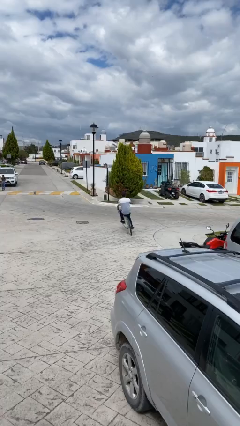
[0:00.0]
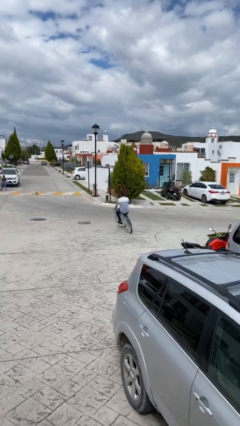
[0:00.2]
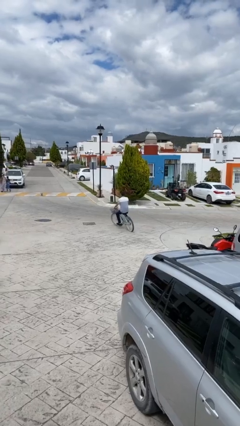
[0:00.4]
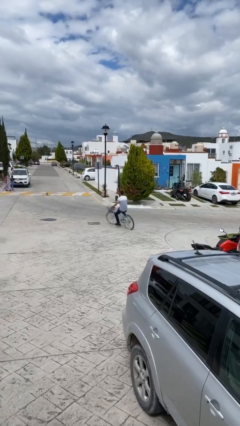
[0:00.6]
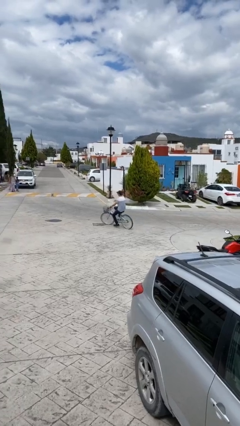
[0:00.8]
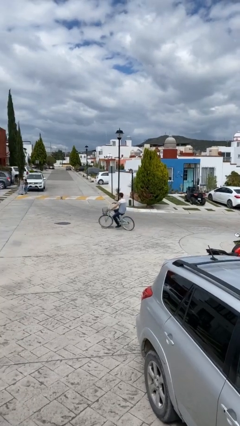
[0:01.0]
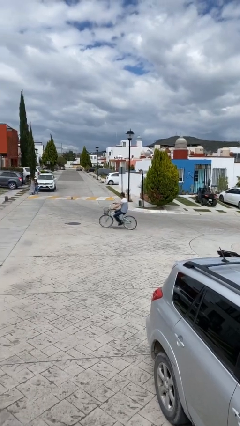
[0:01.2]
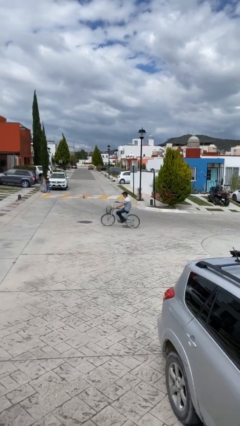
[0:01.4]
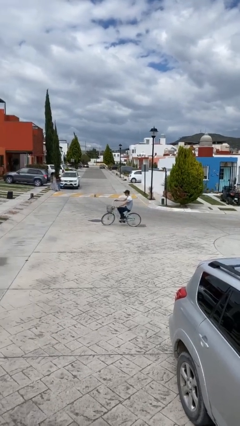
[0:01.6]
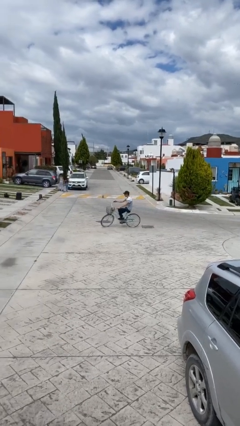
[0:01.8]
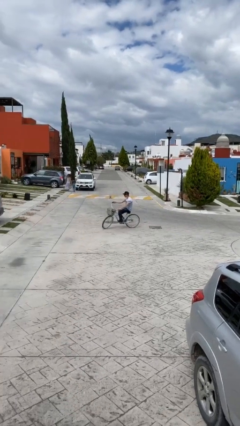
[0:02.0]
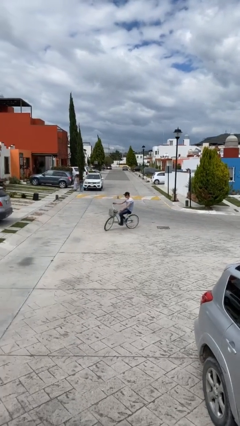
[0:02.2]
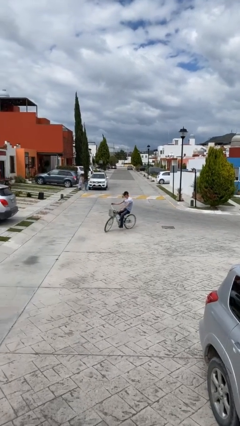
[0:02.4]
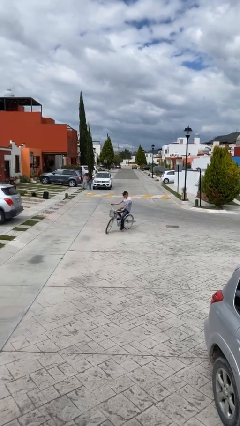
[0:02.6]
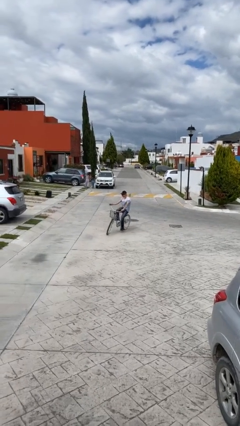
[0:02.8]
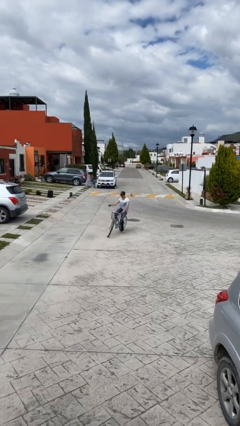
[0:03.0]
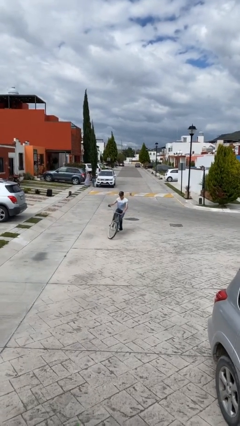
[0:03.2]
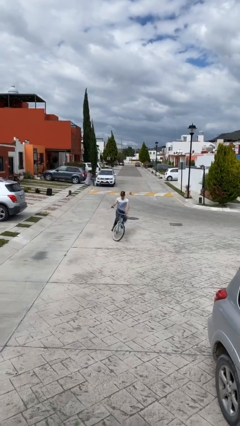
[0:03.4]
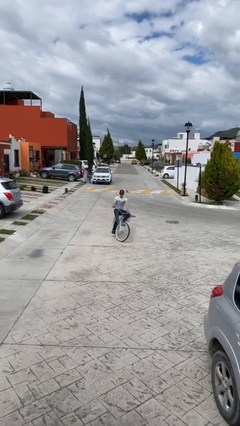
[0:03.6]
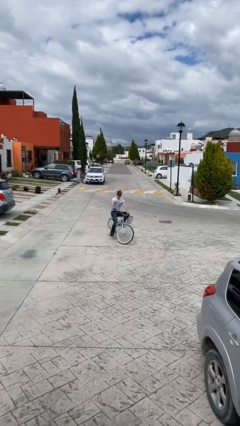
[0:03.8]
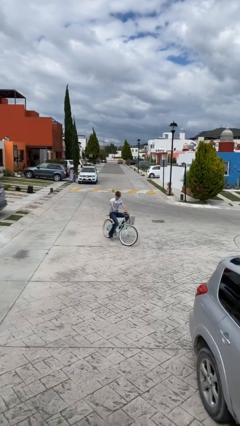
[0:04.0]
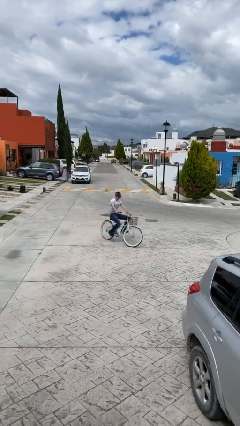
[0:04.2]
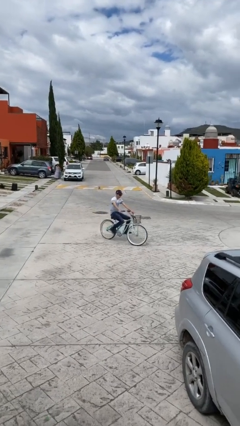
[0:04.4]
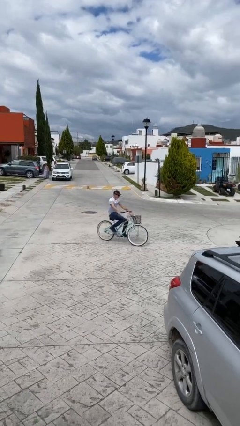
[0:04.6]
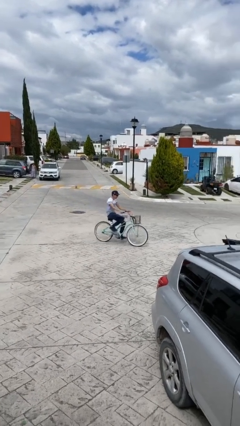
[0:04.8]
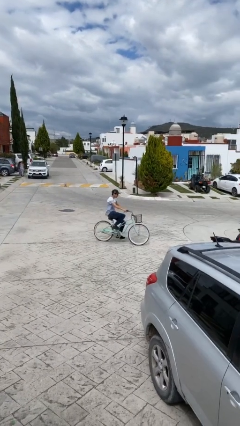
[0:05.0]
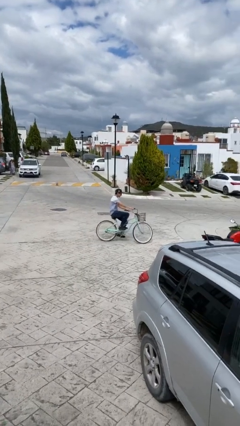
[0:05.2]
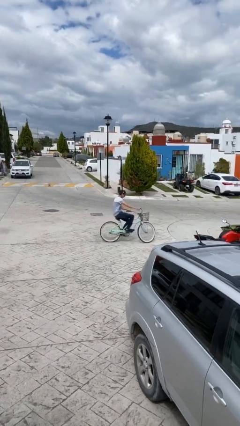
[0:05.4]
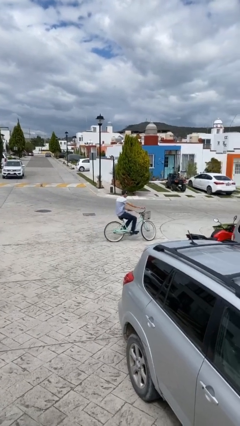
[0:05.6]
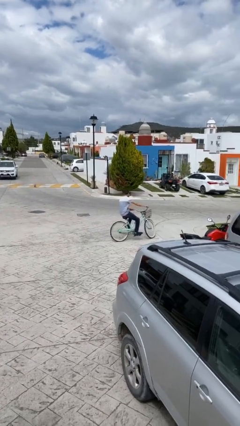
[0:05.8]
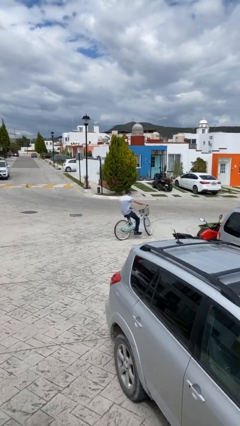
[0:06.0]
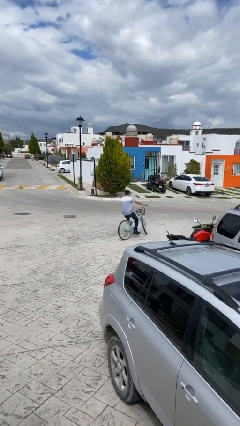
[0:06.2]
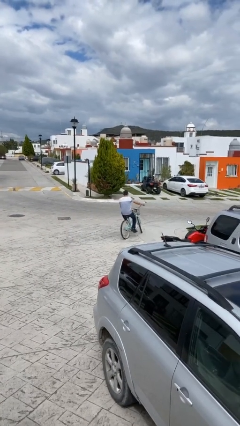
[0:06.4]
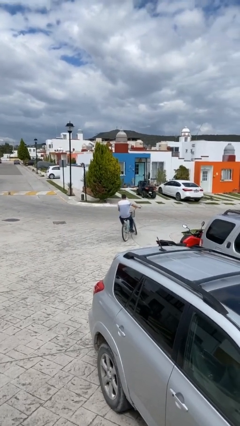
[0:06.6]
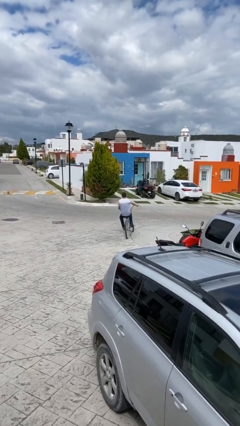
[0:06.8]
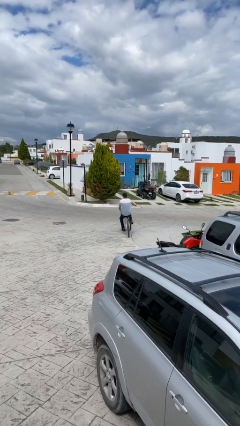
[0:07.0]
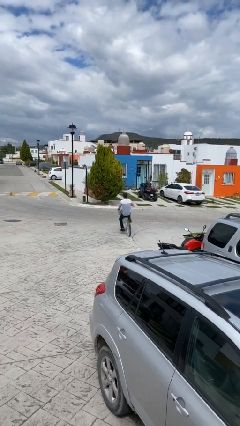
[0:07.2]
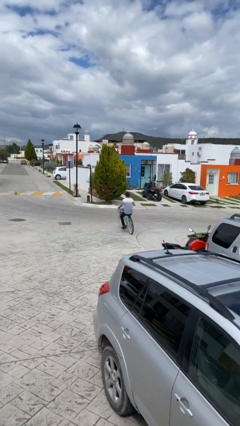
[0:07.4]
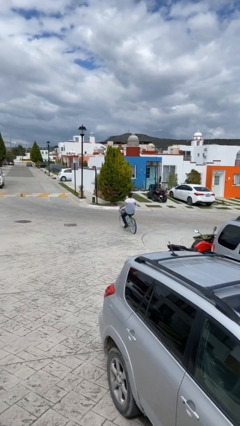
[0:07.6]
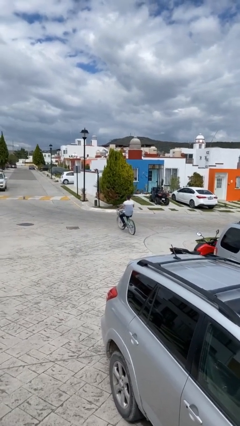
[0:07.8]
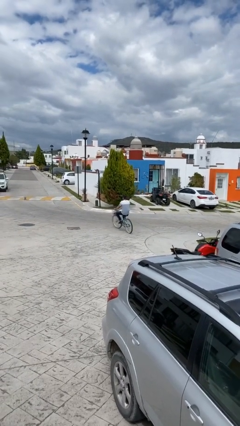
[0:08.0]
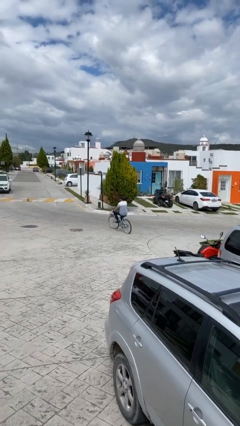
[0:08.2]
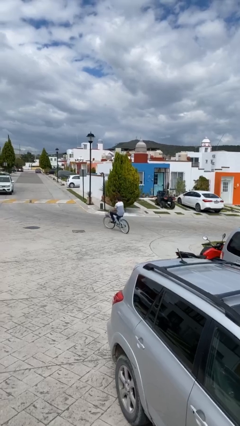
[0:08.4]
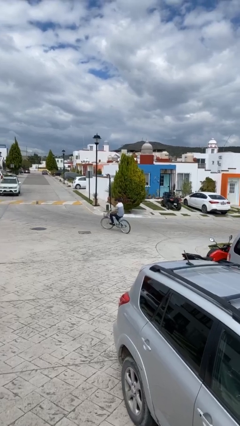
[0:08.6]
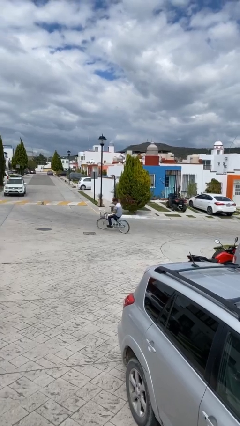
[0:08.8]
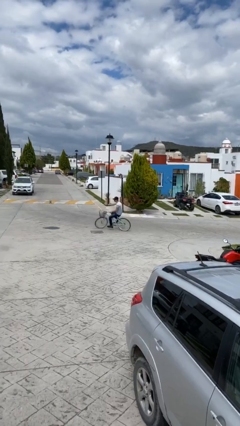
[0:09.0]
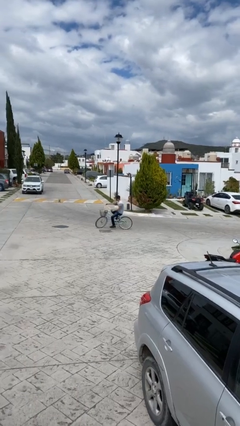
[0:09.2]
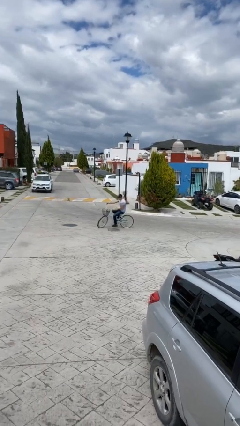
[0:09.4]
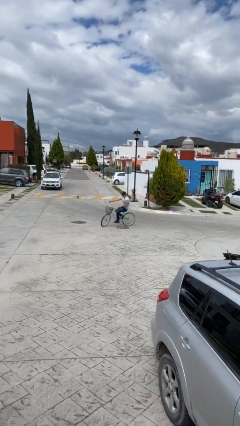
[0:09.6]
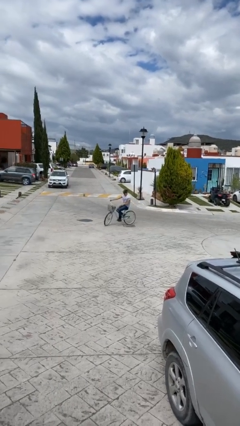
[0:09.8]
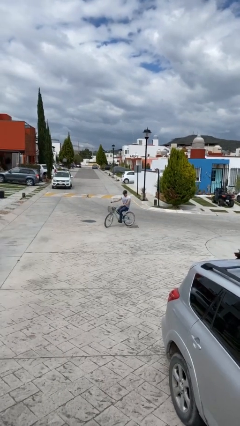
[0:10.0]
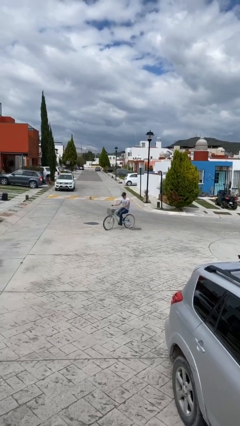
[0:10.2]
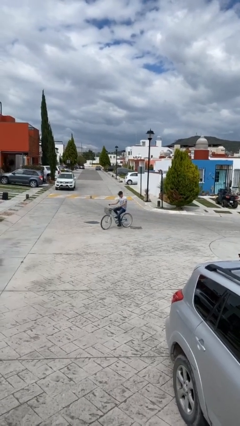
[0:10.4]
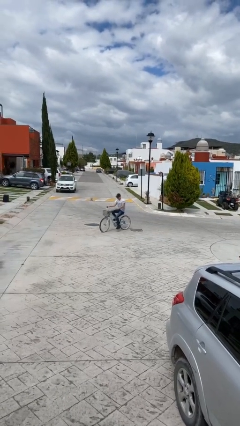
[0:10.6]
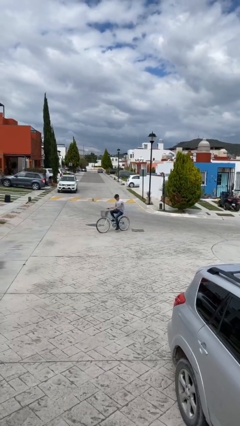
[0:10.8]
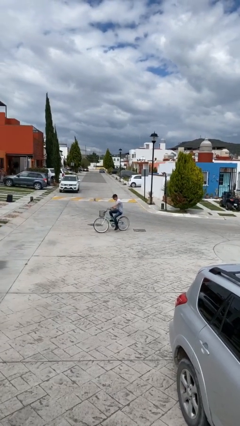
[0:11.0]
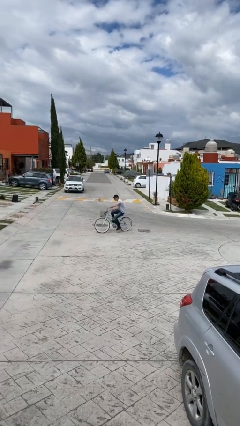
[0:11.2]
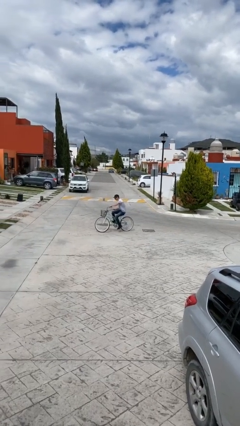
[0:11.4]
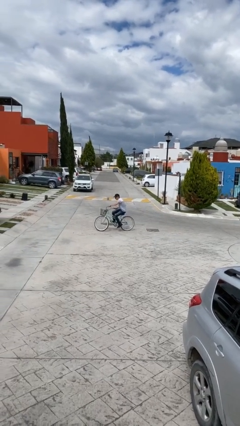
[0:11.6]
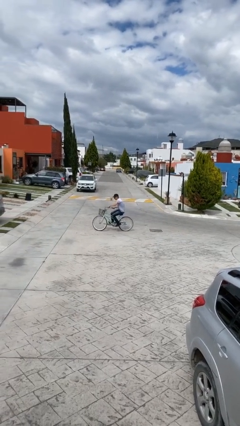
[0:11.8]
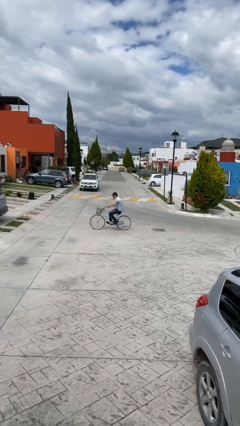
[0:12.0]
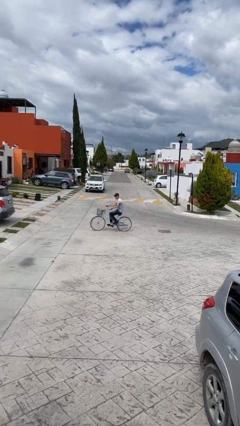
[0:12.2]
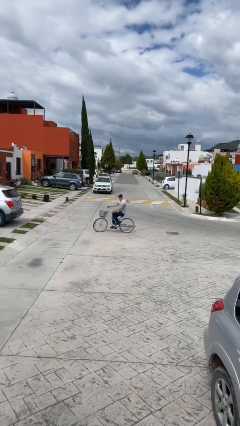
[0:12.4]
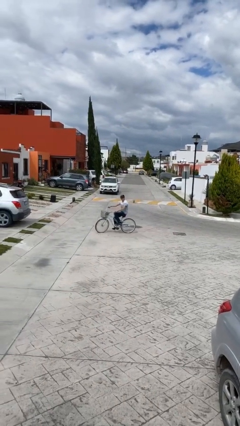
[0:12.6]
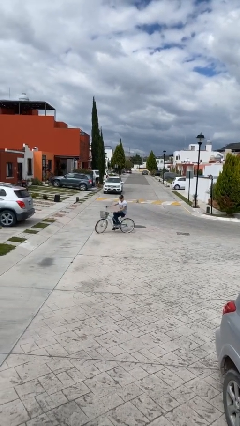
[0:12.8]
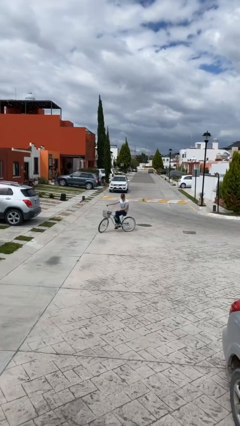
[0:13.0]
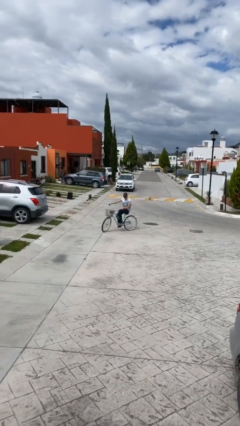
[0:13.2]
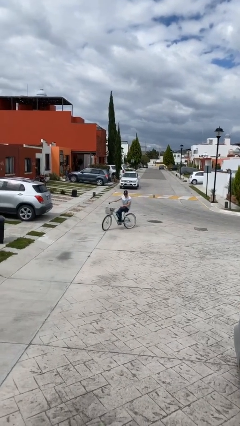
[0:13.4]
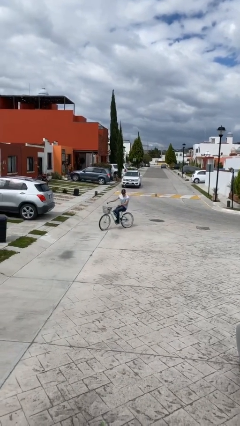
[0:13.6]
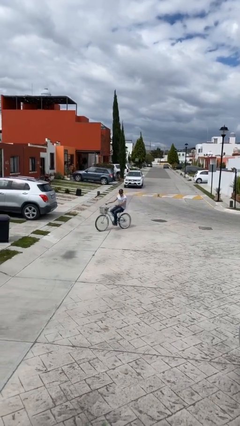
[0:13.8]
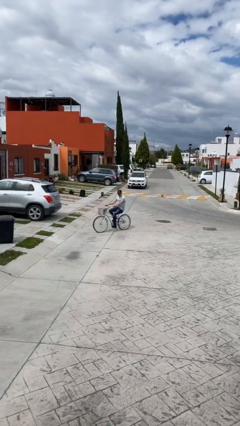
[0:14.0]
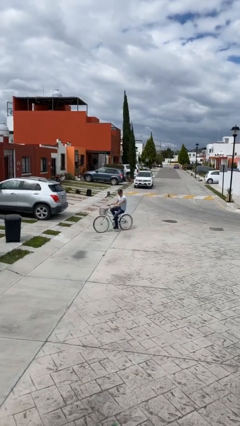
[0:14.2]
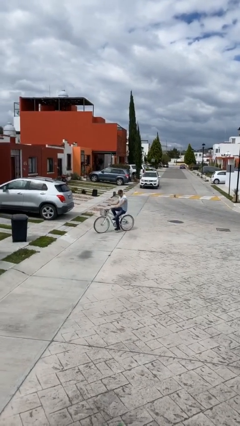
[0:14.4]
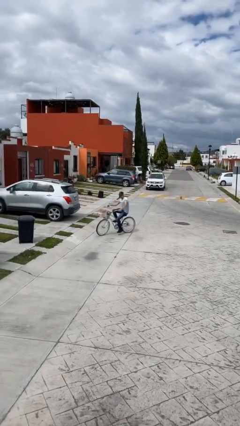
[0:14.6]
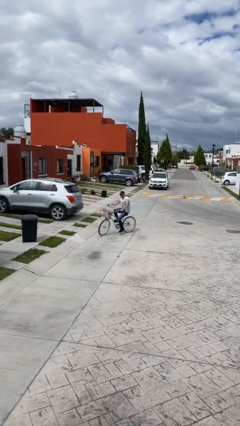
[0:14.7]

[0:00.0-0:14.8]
person rides bicycle

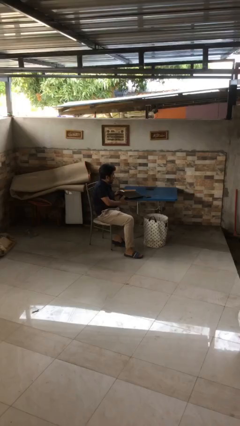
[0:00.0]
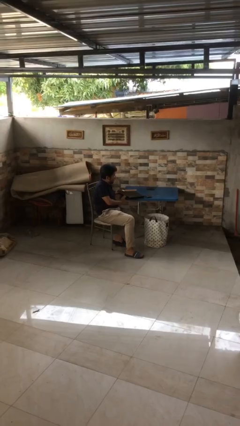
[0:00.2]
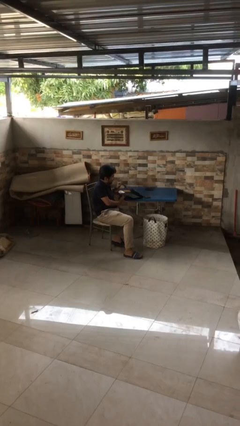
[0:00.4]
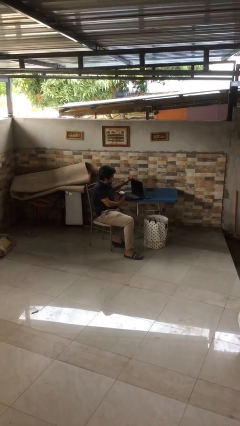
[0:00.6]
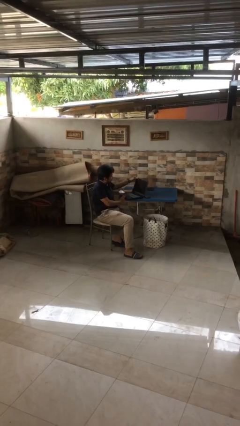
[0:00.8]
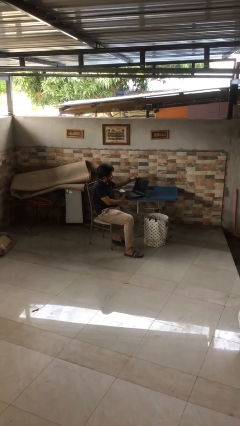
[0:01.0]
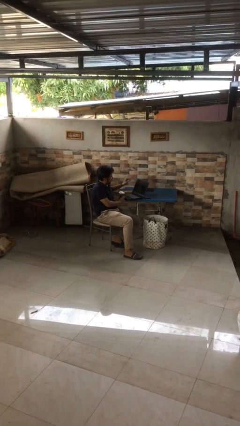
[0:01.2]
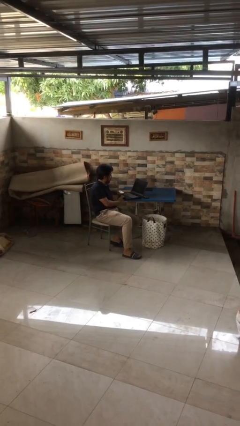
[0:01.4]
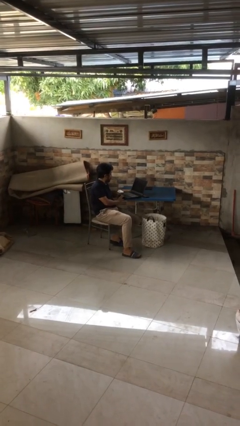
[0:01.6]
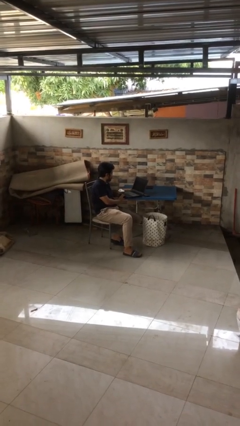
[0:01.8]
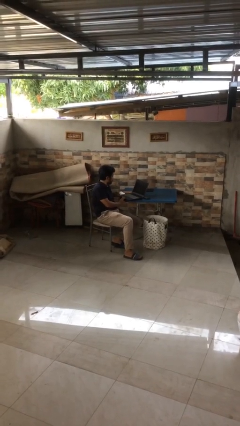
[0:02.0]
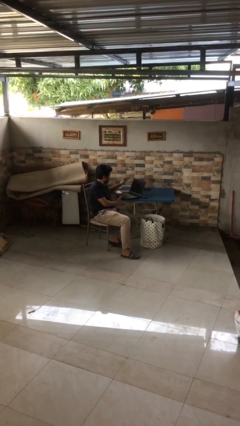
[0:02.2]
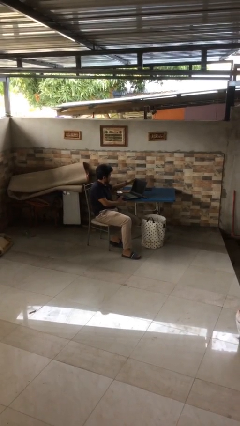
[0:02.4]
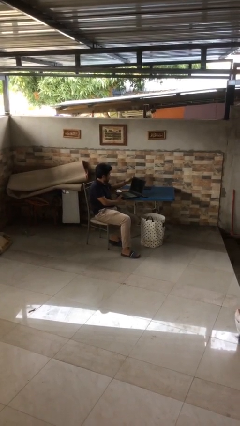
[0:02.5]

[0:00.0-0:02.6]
person opens laptop

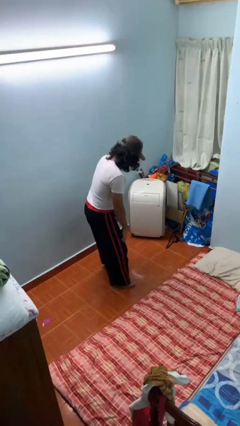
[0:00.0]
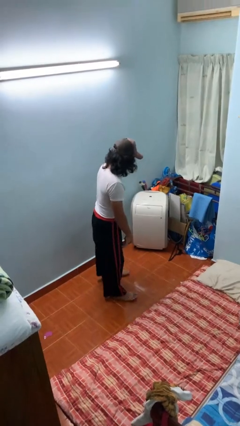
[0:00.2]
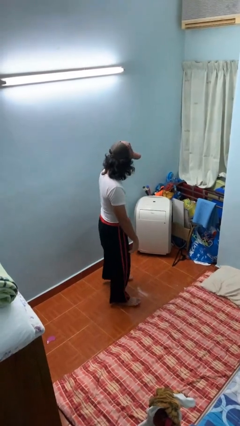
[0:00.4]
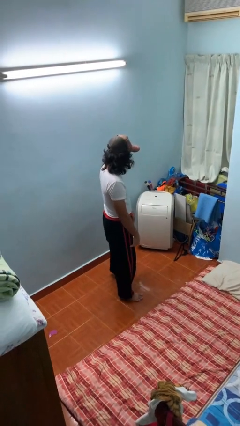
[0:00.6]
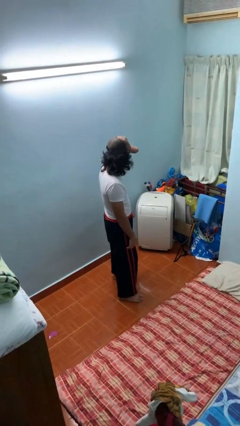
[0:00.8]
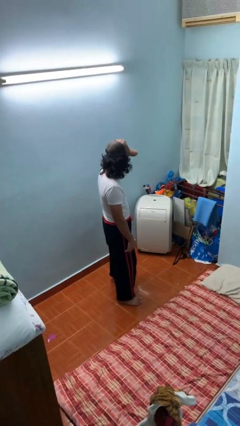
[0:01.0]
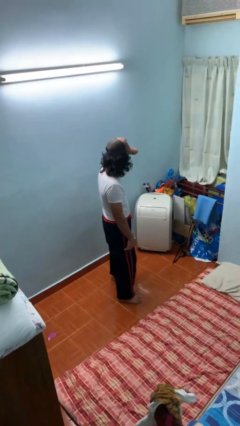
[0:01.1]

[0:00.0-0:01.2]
person stands up
